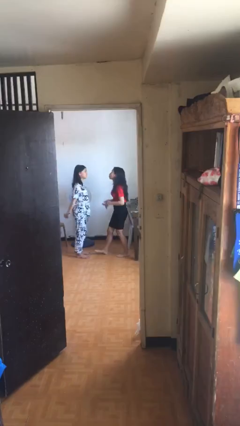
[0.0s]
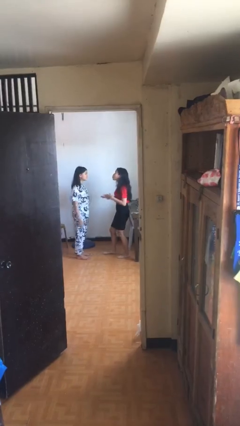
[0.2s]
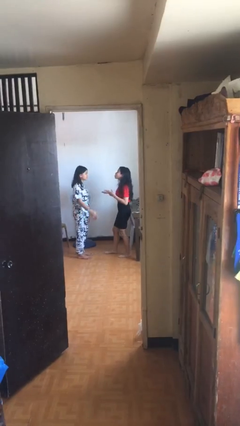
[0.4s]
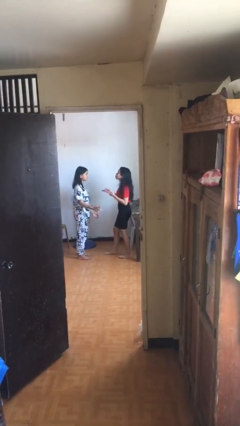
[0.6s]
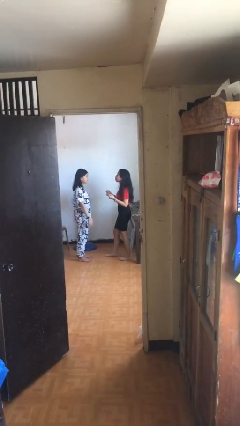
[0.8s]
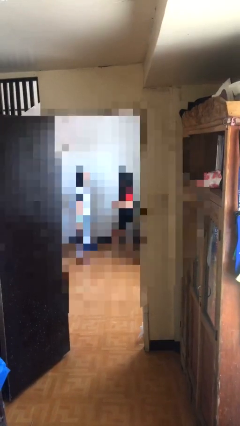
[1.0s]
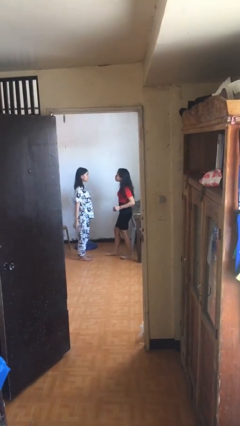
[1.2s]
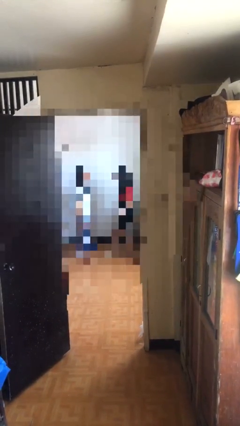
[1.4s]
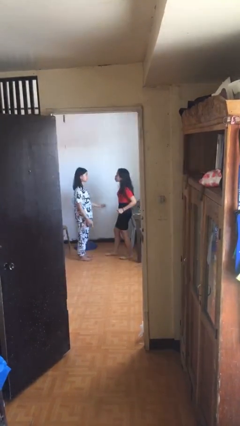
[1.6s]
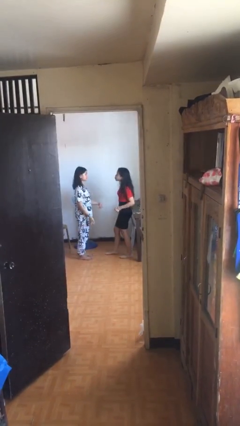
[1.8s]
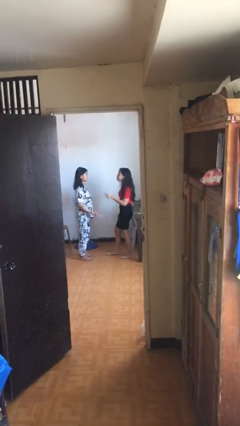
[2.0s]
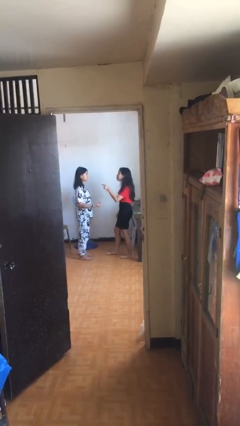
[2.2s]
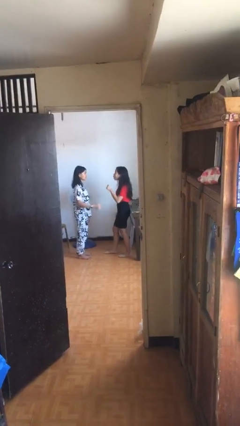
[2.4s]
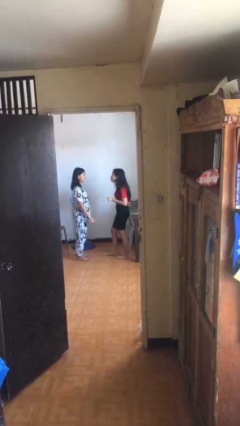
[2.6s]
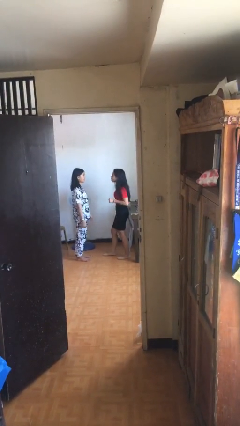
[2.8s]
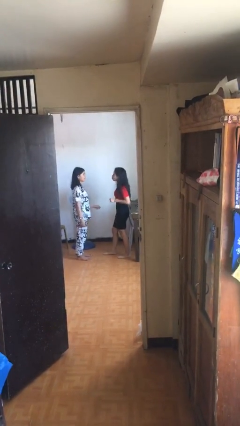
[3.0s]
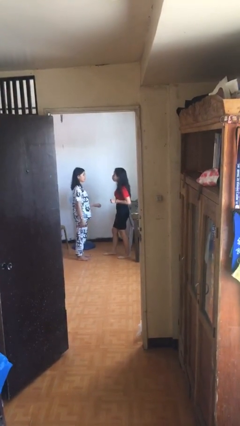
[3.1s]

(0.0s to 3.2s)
person talks to person

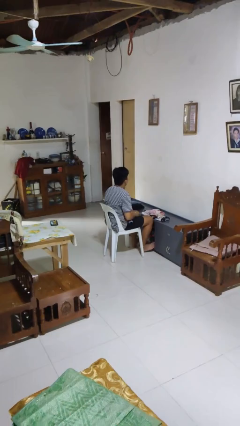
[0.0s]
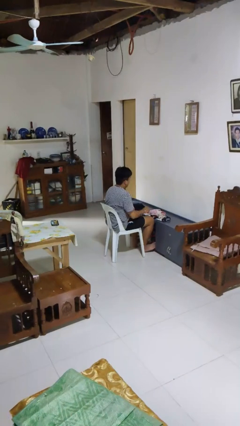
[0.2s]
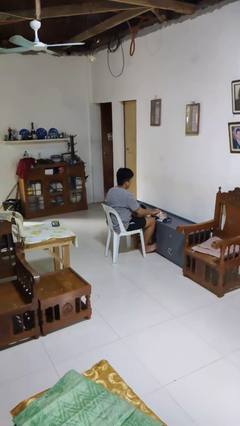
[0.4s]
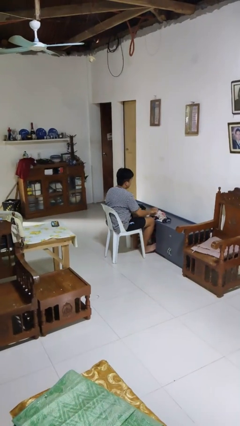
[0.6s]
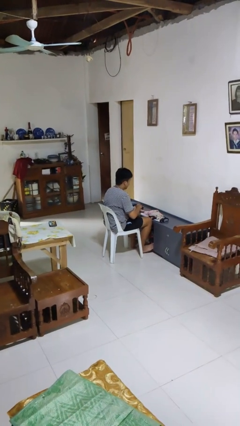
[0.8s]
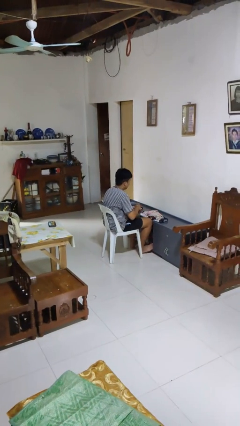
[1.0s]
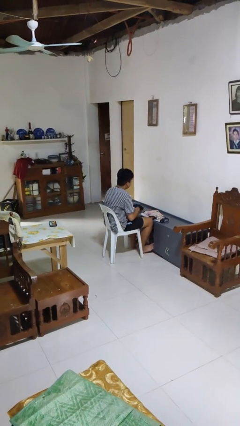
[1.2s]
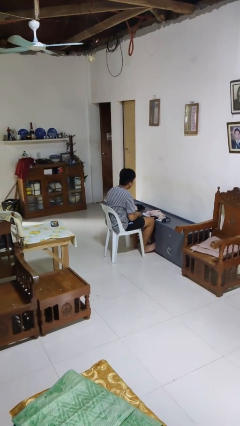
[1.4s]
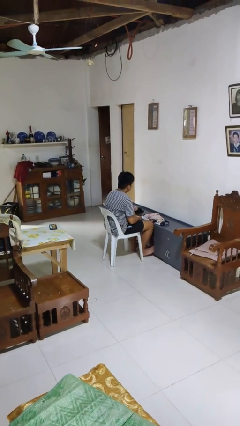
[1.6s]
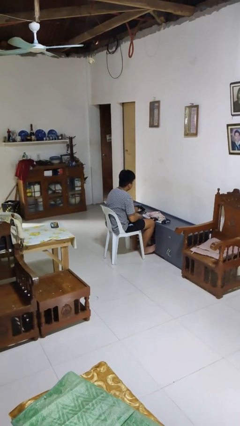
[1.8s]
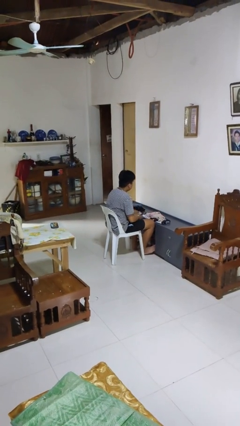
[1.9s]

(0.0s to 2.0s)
person folds socks

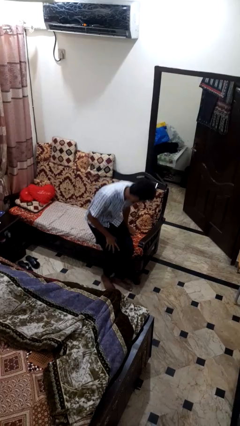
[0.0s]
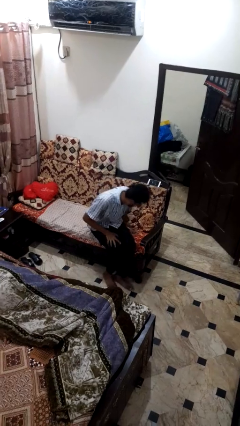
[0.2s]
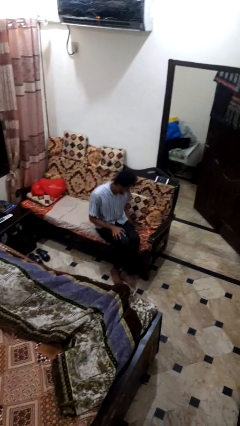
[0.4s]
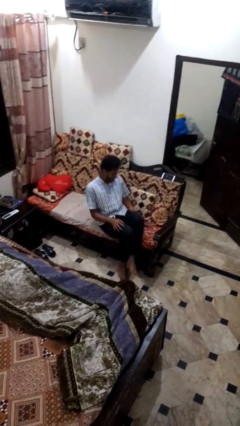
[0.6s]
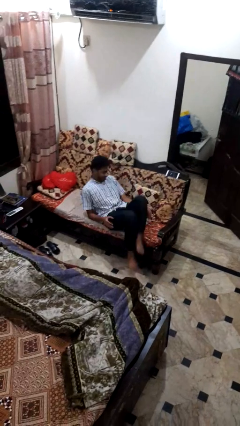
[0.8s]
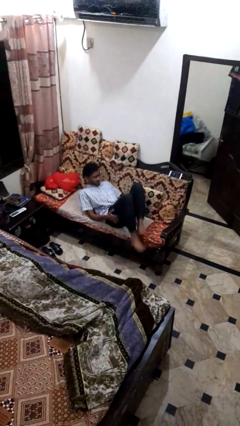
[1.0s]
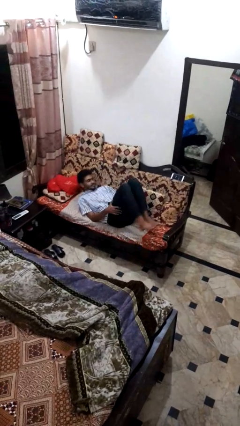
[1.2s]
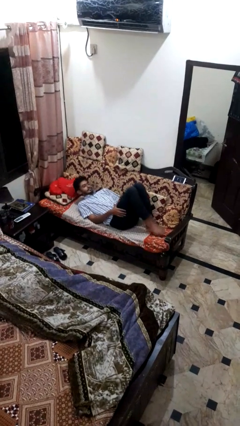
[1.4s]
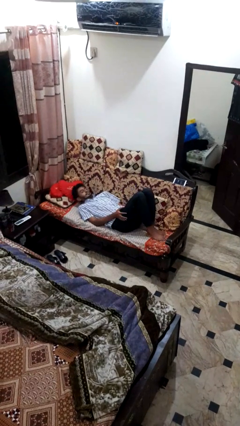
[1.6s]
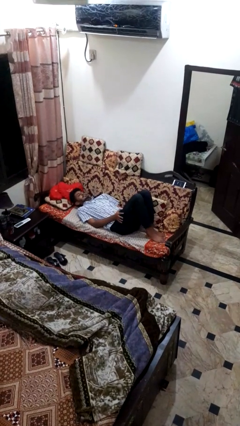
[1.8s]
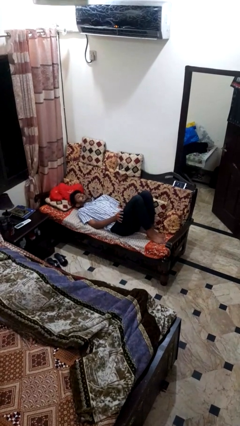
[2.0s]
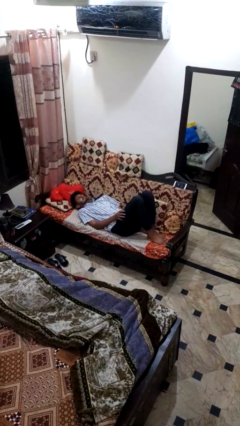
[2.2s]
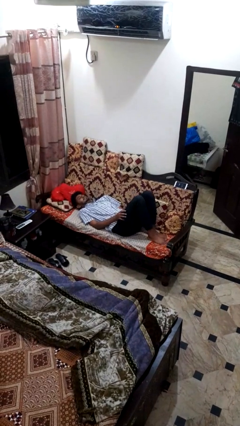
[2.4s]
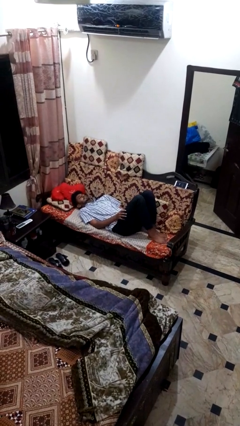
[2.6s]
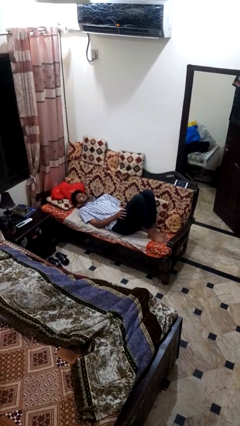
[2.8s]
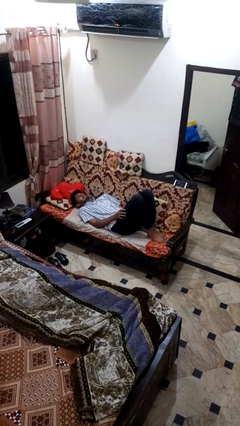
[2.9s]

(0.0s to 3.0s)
person lies down on couch

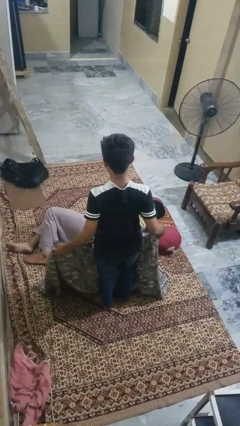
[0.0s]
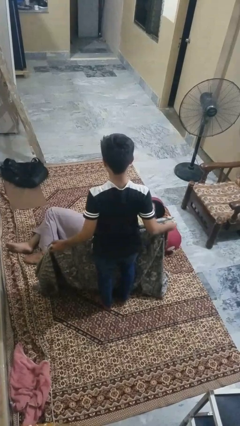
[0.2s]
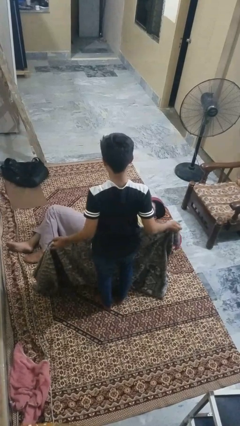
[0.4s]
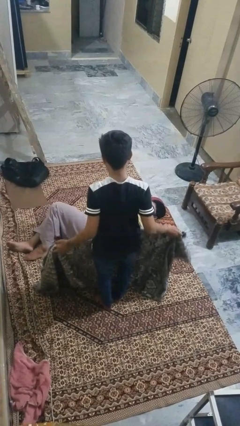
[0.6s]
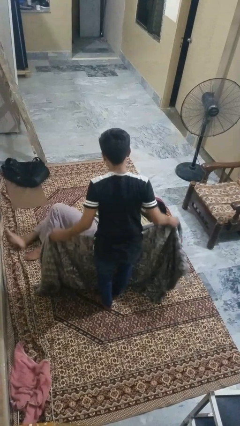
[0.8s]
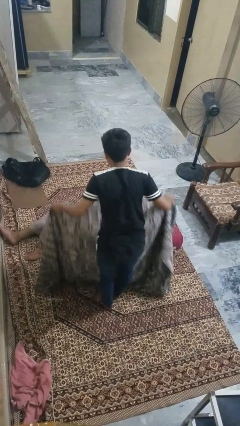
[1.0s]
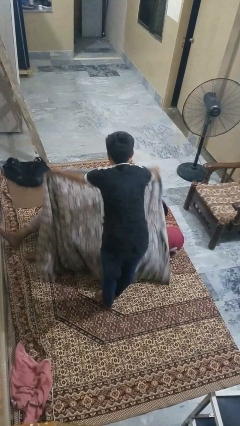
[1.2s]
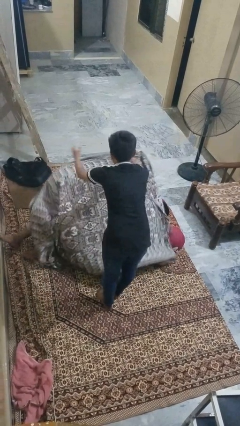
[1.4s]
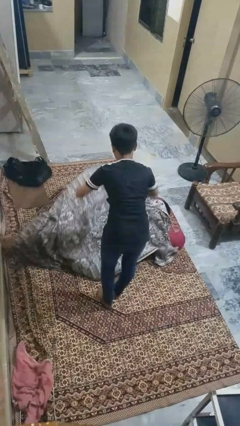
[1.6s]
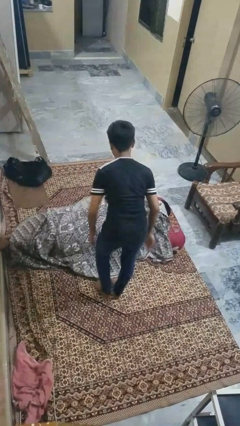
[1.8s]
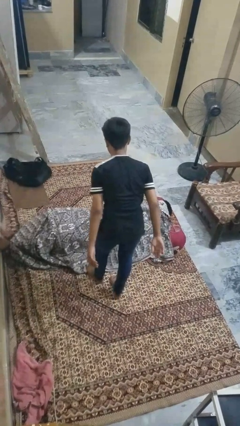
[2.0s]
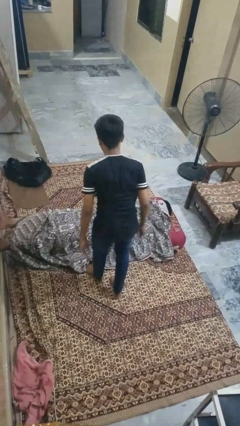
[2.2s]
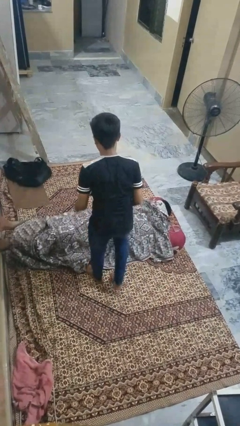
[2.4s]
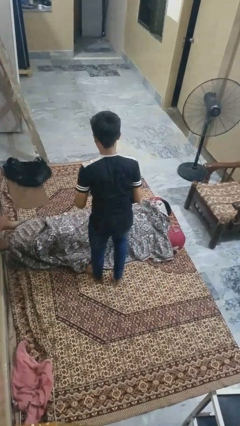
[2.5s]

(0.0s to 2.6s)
person covers friend with blanket

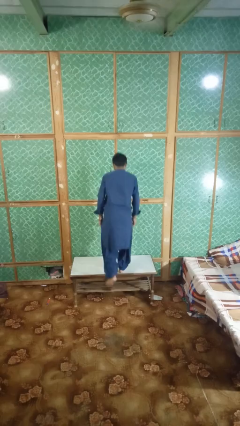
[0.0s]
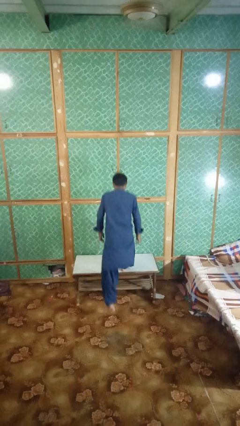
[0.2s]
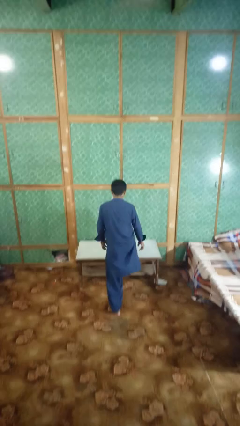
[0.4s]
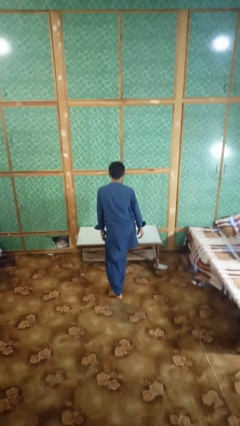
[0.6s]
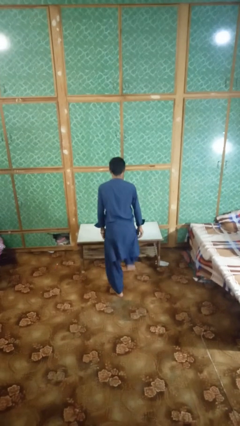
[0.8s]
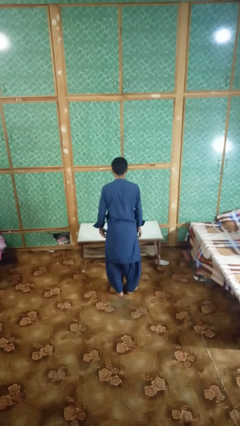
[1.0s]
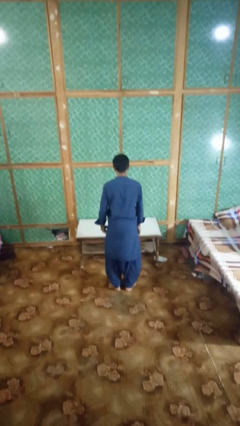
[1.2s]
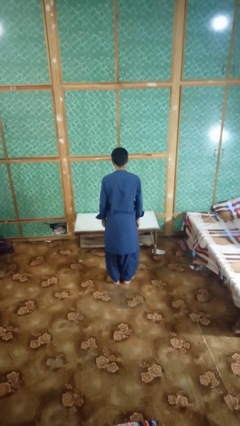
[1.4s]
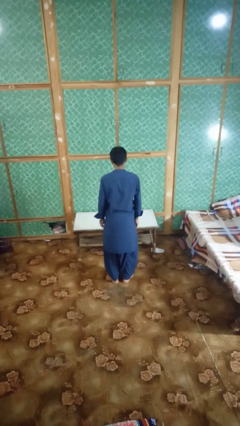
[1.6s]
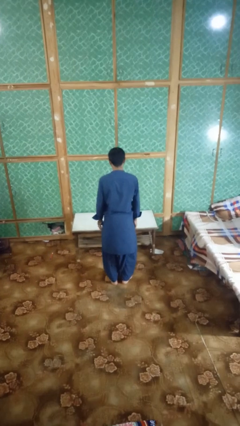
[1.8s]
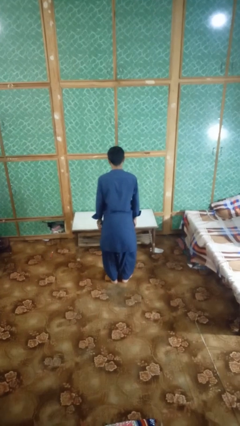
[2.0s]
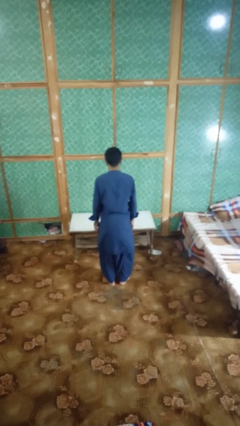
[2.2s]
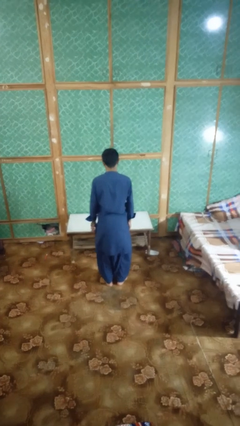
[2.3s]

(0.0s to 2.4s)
person climbs off table

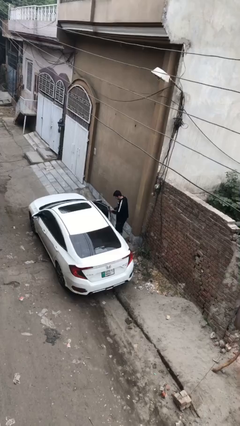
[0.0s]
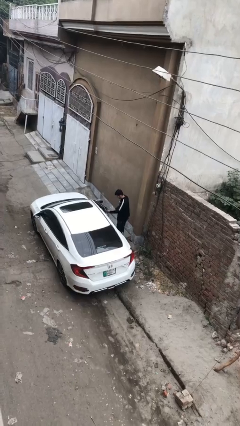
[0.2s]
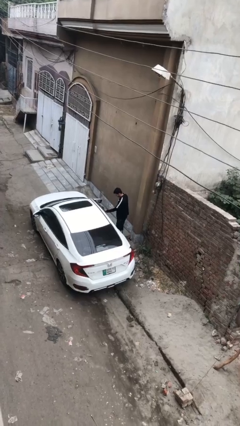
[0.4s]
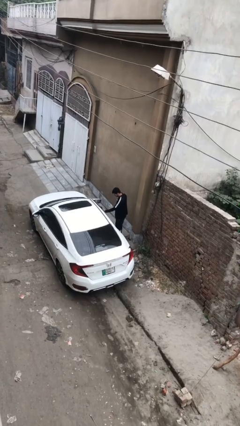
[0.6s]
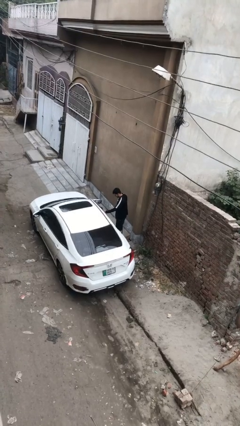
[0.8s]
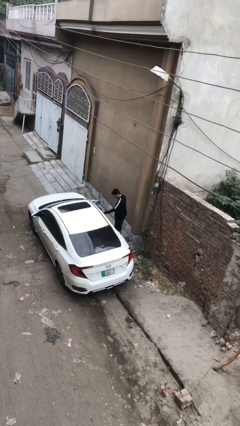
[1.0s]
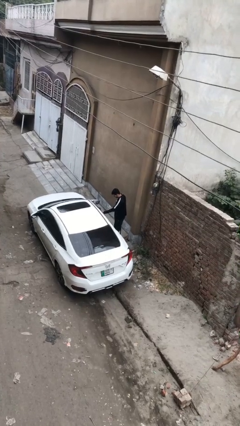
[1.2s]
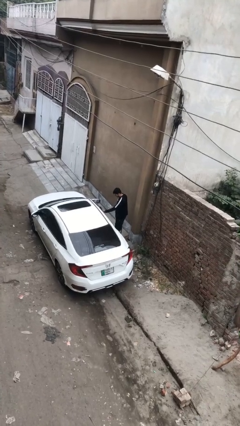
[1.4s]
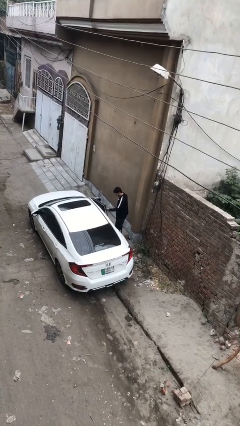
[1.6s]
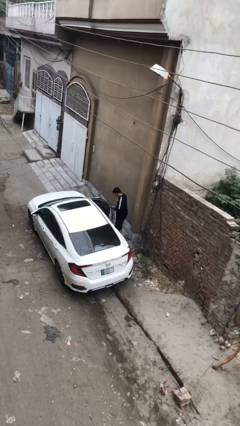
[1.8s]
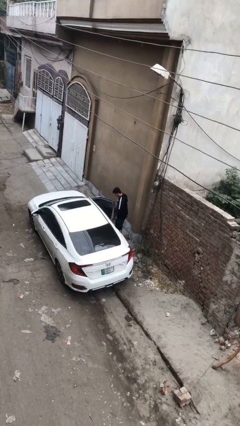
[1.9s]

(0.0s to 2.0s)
person closes car door

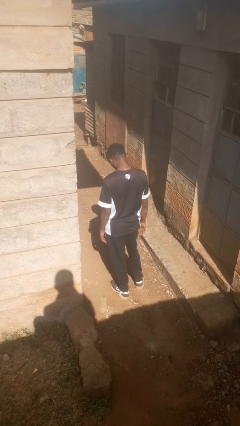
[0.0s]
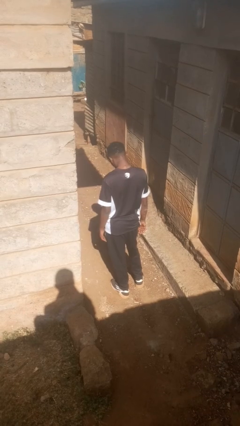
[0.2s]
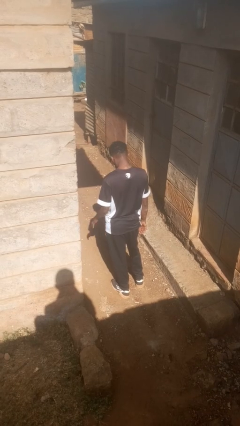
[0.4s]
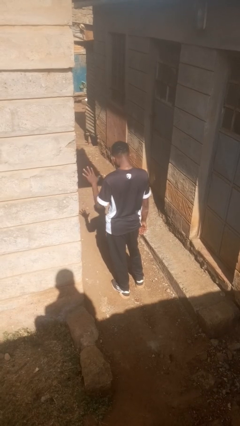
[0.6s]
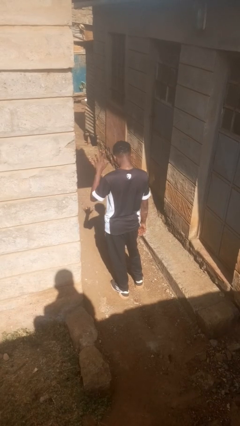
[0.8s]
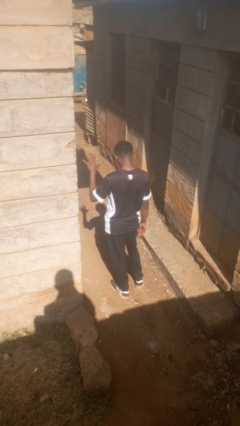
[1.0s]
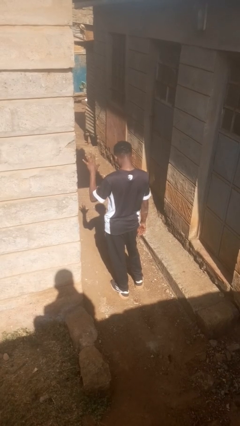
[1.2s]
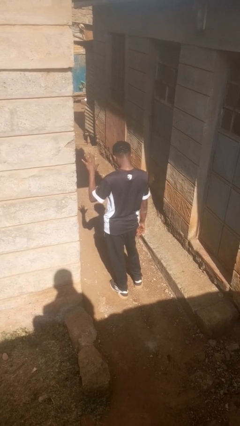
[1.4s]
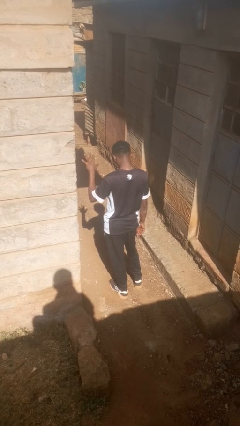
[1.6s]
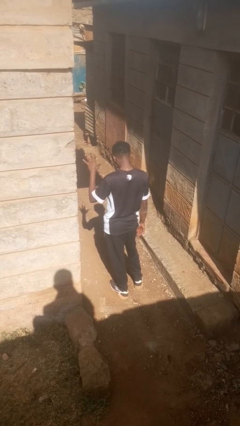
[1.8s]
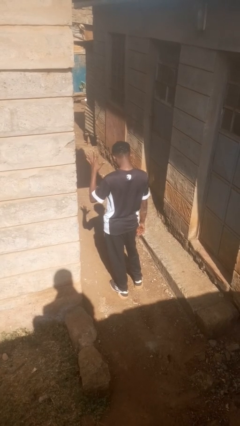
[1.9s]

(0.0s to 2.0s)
person gestures number five
